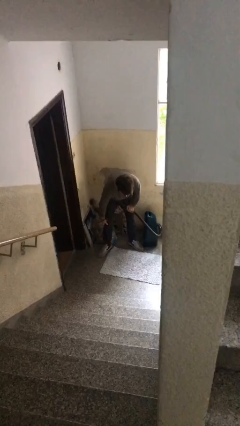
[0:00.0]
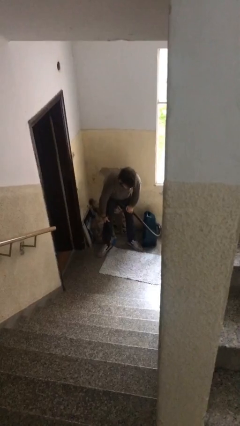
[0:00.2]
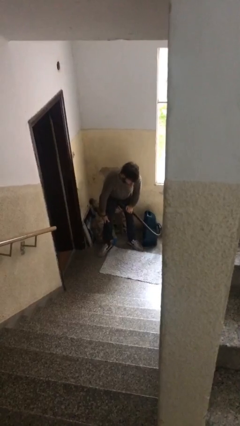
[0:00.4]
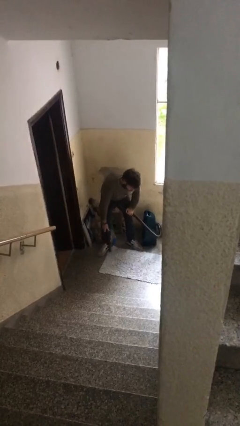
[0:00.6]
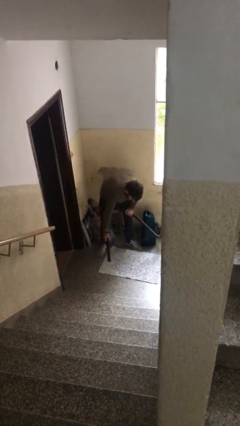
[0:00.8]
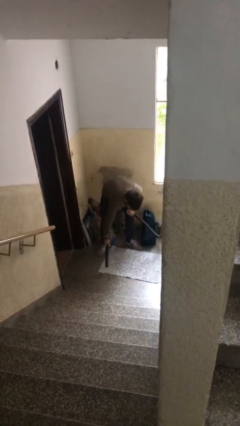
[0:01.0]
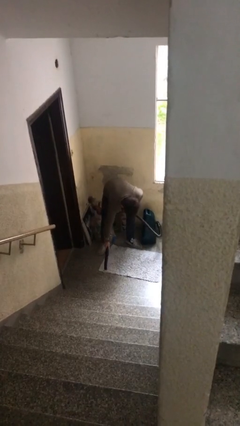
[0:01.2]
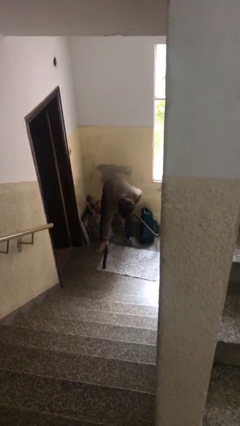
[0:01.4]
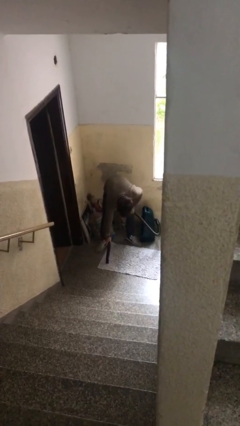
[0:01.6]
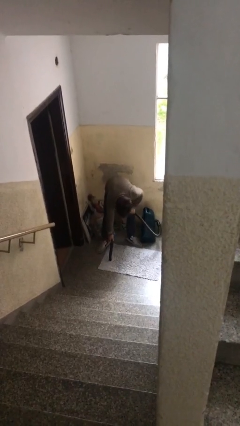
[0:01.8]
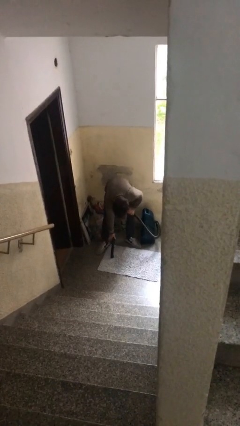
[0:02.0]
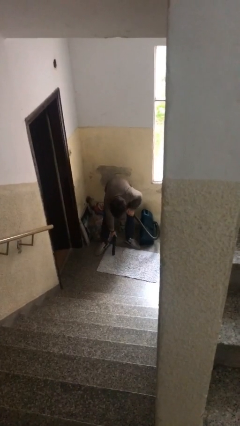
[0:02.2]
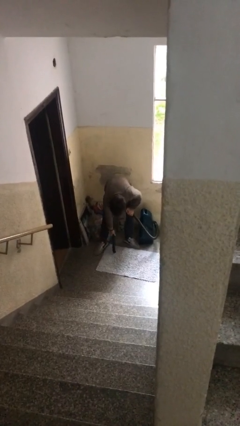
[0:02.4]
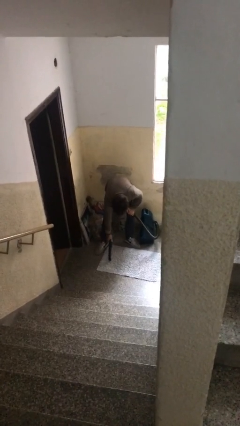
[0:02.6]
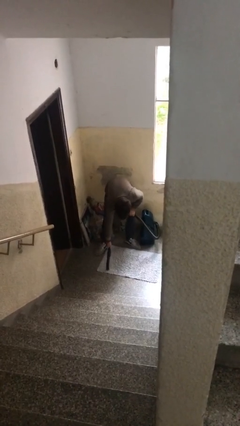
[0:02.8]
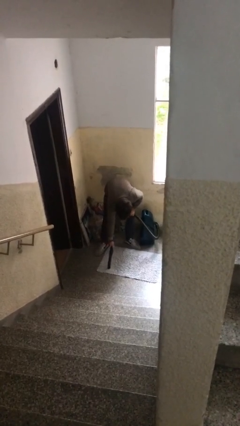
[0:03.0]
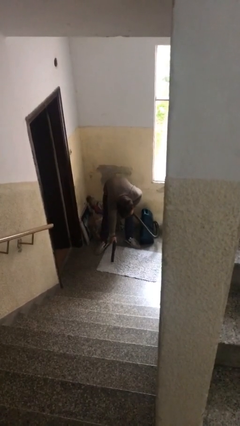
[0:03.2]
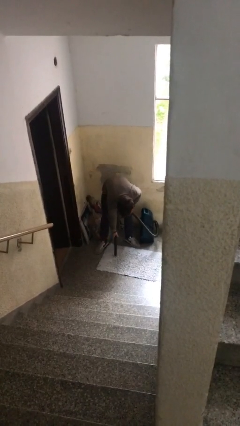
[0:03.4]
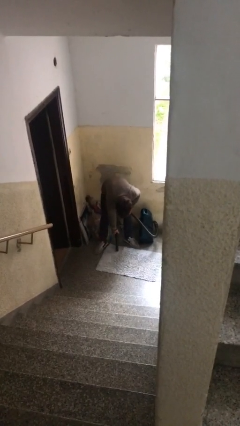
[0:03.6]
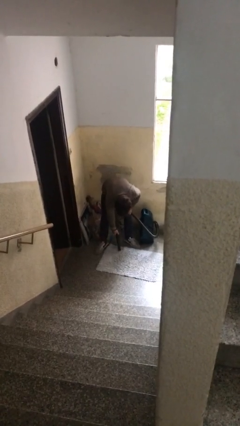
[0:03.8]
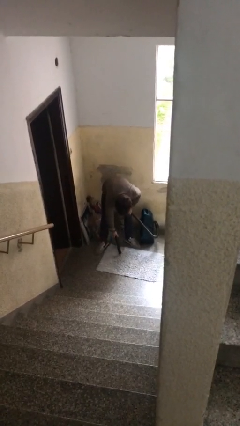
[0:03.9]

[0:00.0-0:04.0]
person vacuums carpet

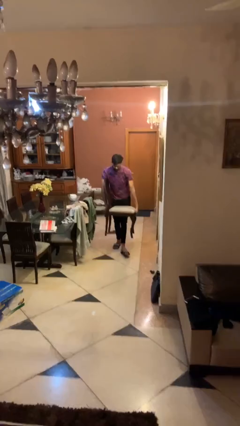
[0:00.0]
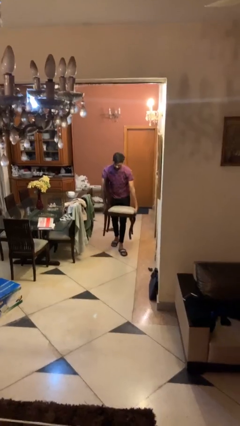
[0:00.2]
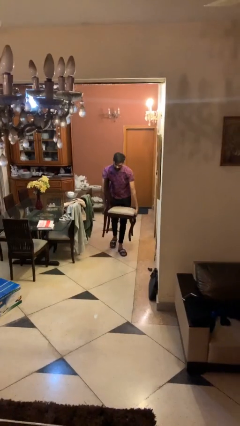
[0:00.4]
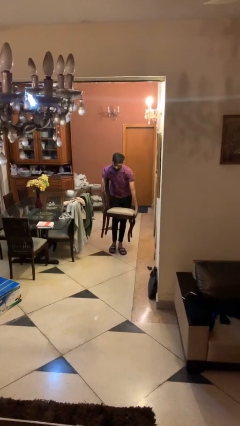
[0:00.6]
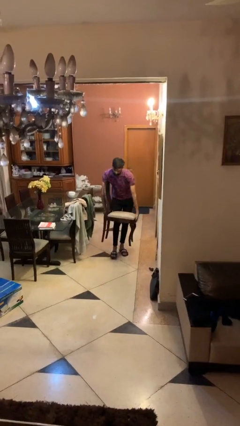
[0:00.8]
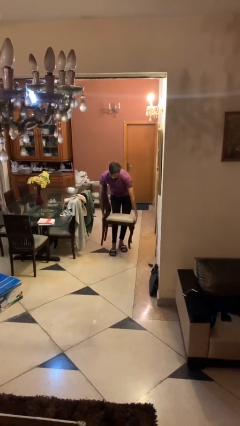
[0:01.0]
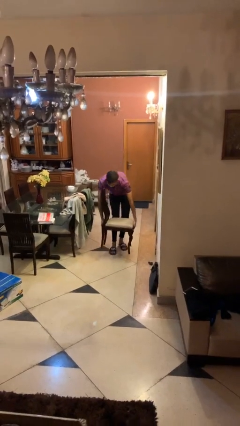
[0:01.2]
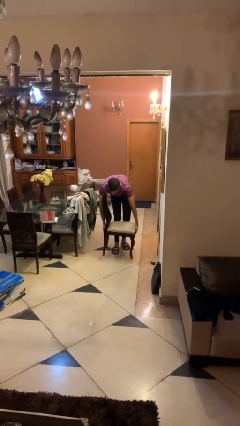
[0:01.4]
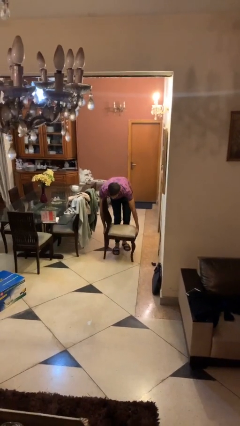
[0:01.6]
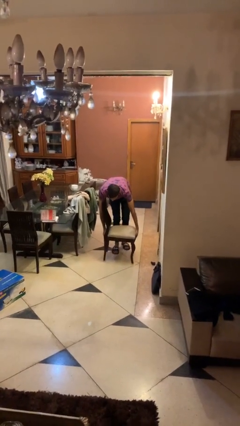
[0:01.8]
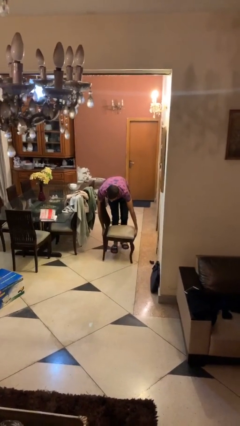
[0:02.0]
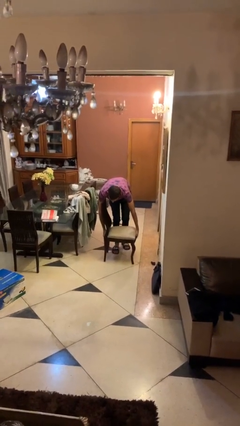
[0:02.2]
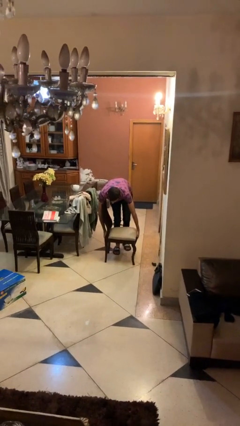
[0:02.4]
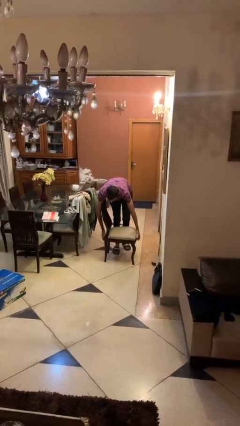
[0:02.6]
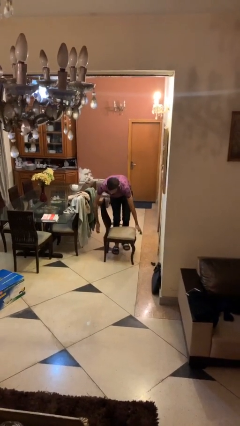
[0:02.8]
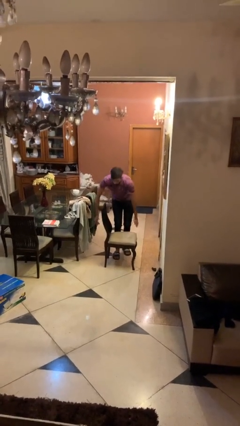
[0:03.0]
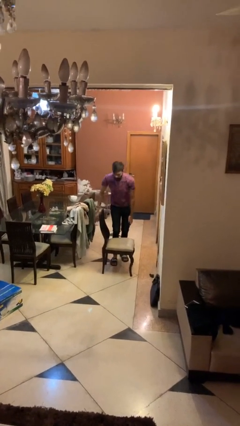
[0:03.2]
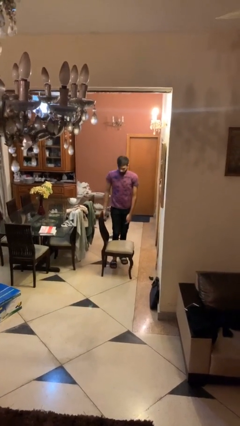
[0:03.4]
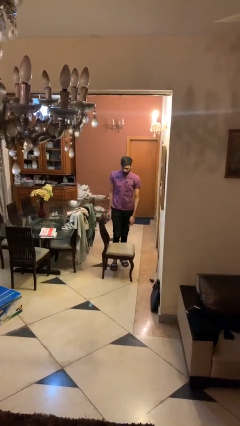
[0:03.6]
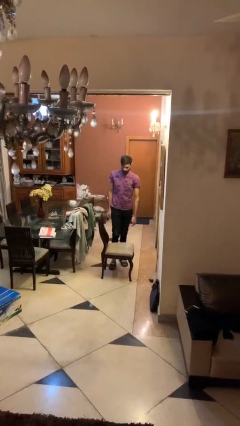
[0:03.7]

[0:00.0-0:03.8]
person puts down object on floor

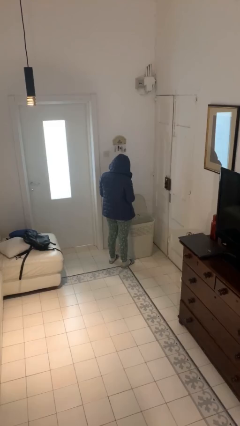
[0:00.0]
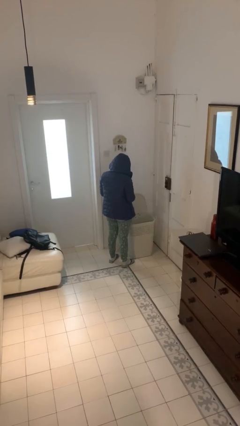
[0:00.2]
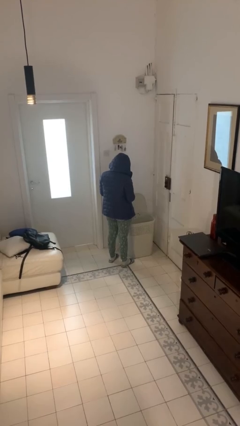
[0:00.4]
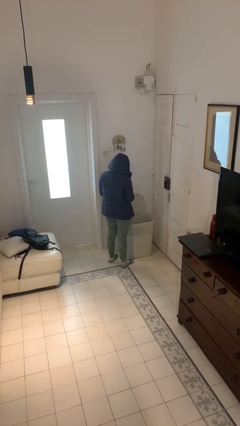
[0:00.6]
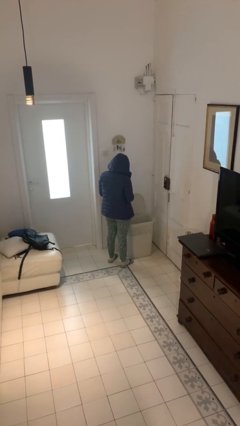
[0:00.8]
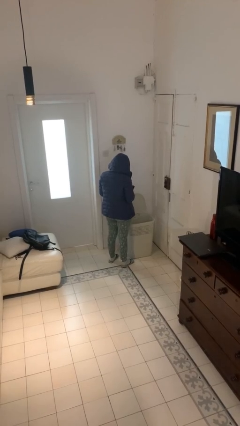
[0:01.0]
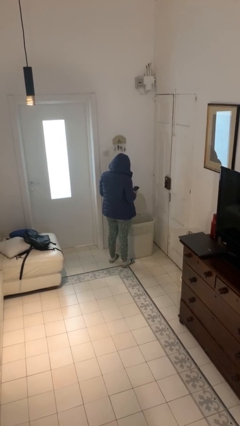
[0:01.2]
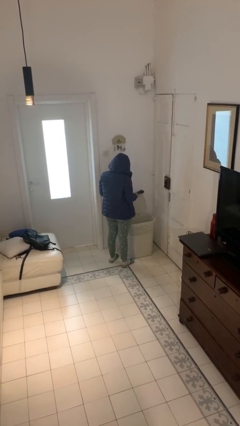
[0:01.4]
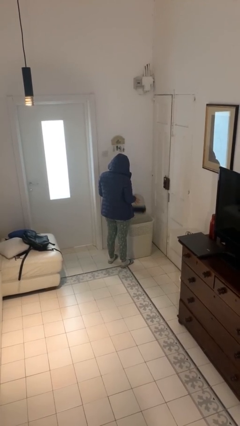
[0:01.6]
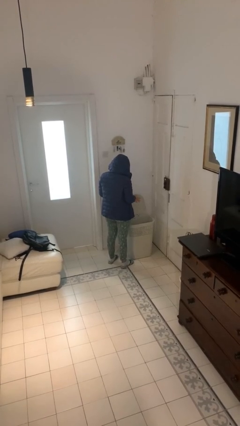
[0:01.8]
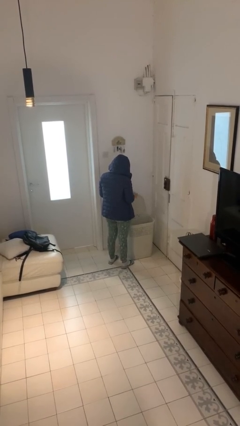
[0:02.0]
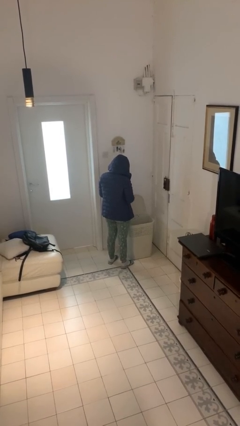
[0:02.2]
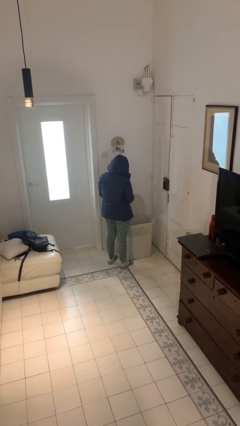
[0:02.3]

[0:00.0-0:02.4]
person discards trash

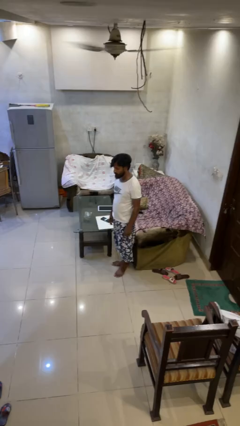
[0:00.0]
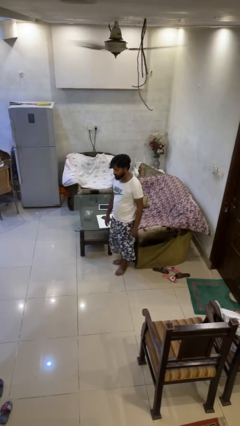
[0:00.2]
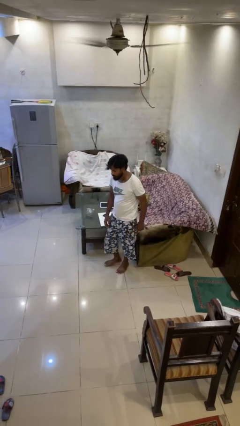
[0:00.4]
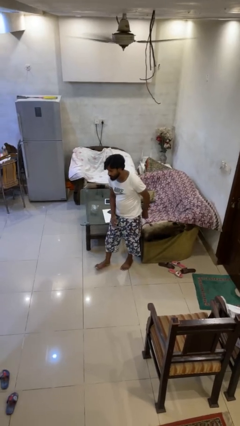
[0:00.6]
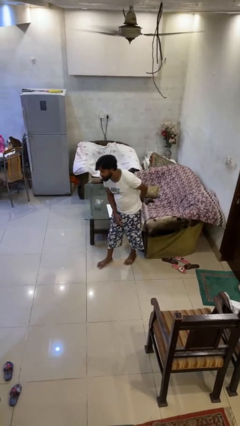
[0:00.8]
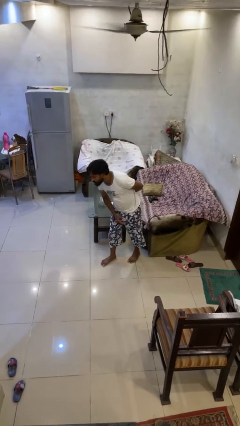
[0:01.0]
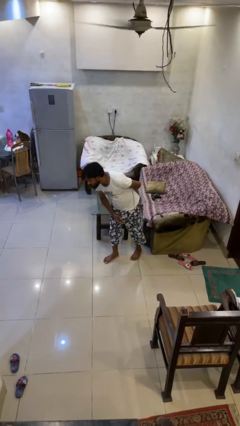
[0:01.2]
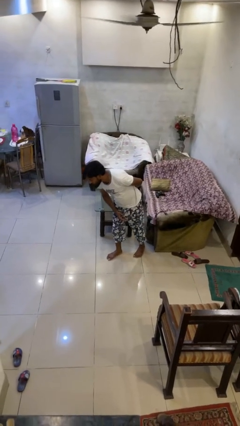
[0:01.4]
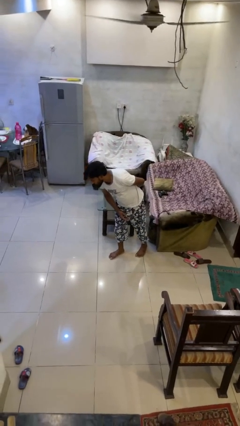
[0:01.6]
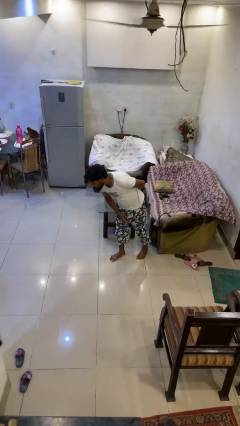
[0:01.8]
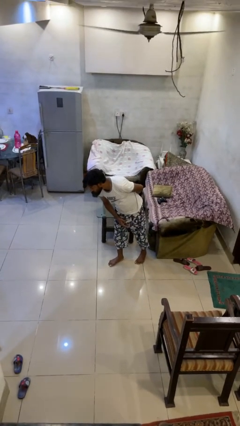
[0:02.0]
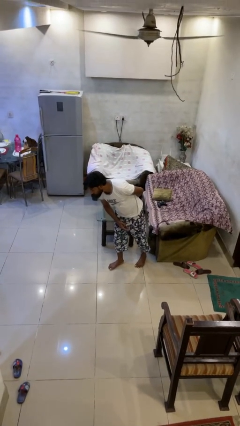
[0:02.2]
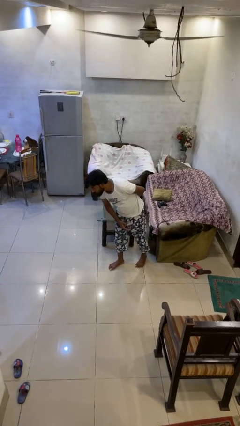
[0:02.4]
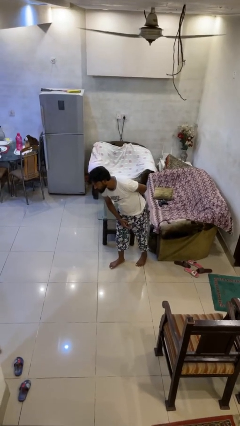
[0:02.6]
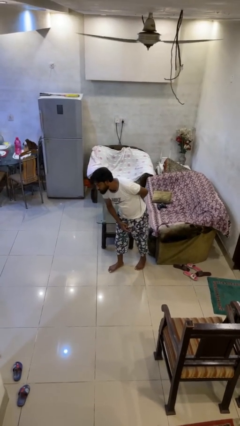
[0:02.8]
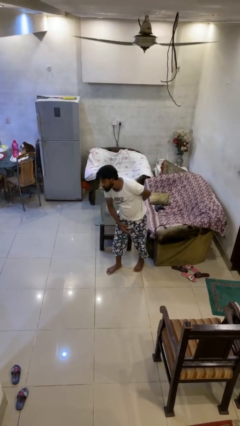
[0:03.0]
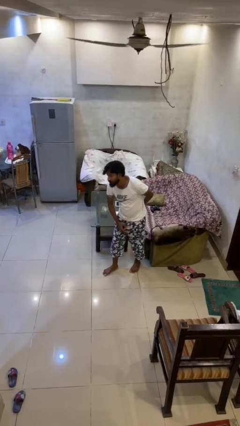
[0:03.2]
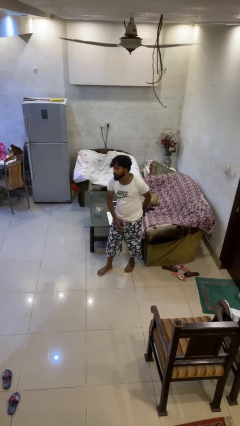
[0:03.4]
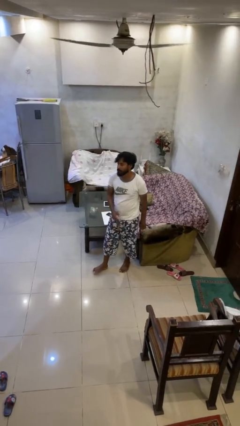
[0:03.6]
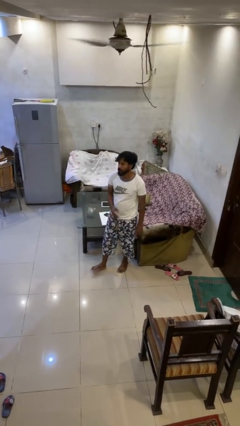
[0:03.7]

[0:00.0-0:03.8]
person bows

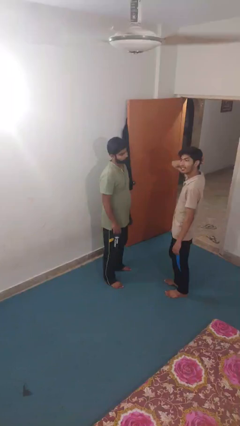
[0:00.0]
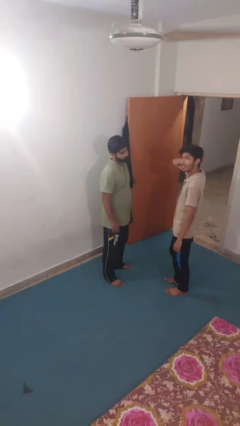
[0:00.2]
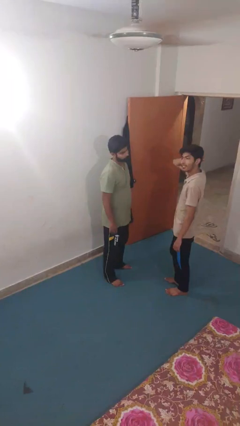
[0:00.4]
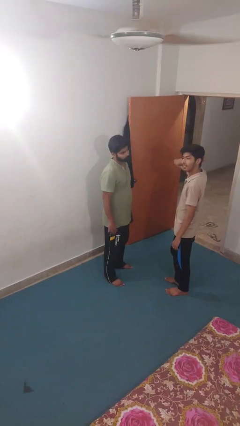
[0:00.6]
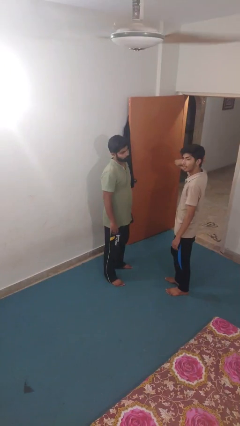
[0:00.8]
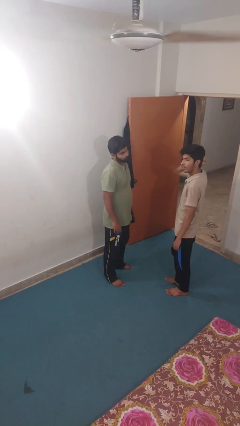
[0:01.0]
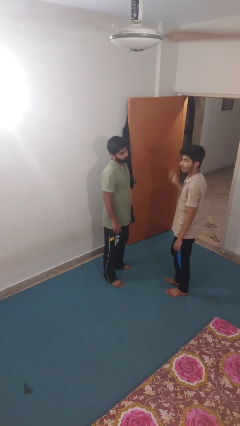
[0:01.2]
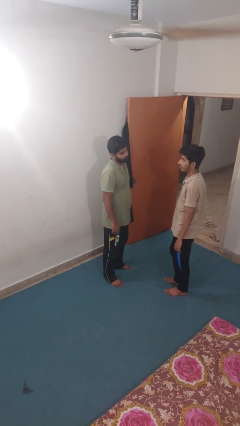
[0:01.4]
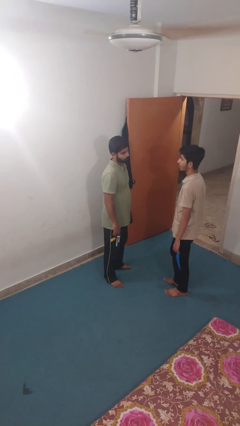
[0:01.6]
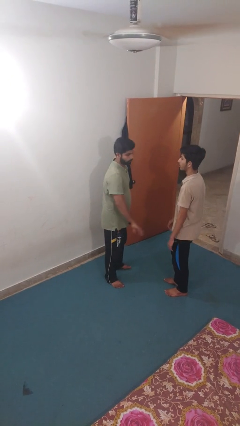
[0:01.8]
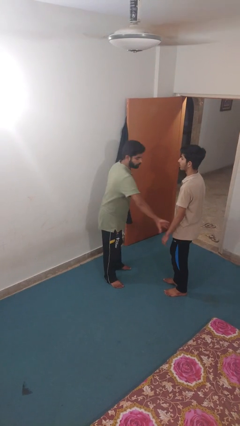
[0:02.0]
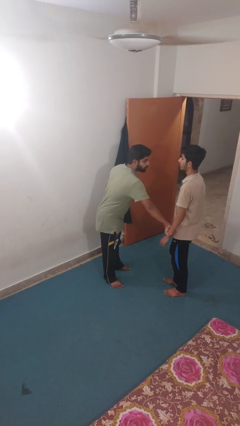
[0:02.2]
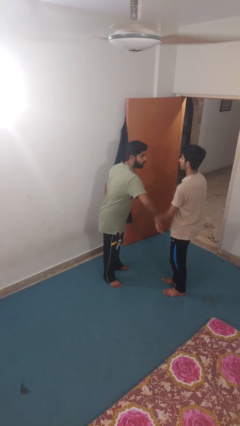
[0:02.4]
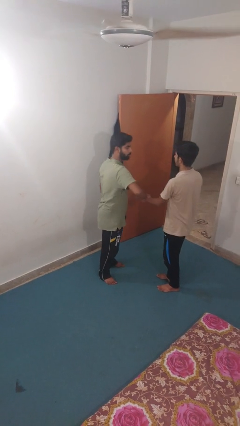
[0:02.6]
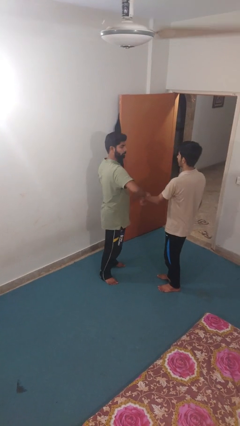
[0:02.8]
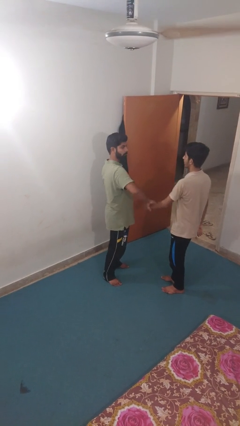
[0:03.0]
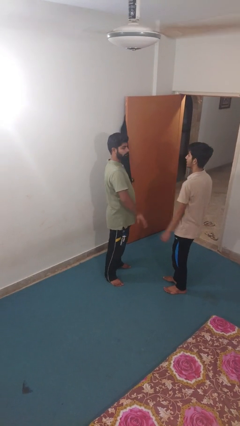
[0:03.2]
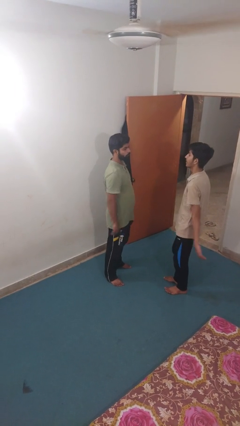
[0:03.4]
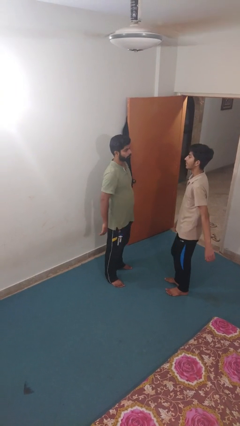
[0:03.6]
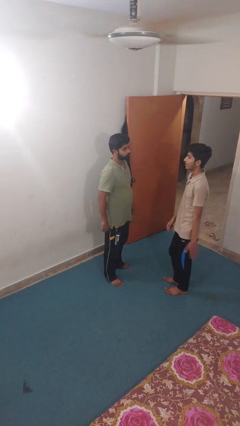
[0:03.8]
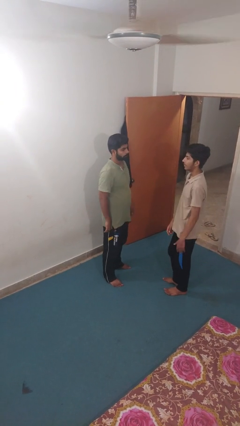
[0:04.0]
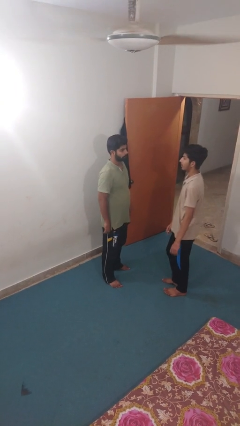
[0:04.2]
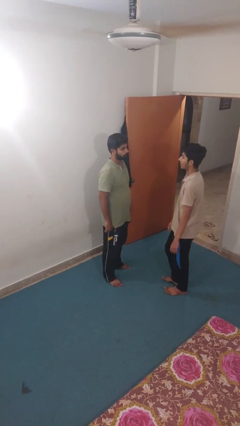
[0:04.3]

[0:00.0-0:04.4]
person grabs person by forearm
